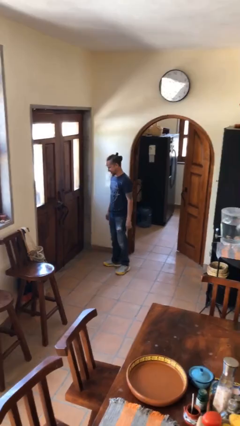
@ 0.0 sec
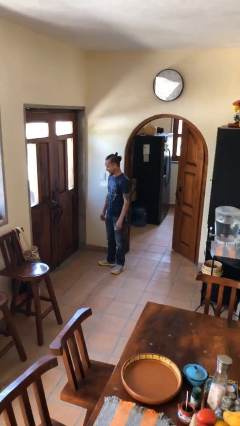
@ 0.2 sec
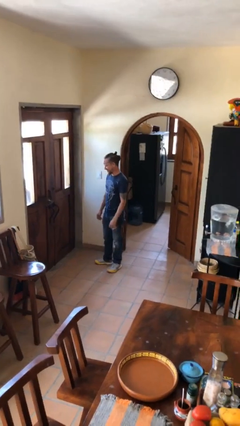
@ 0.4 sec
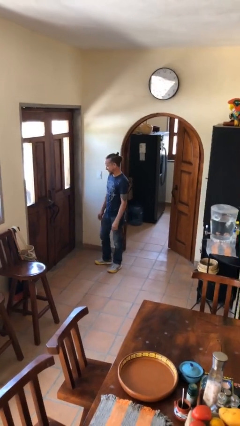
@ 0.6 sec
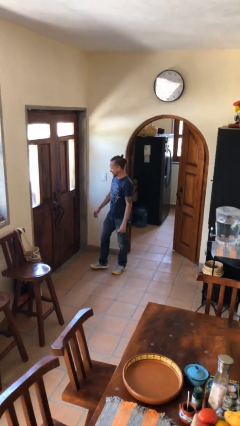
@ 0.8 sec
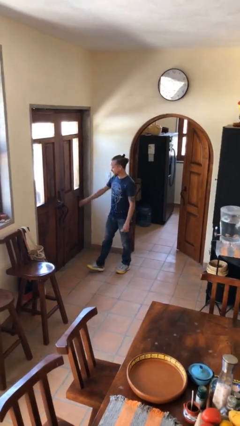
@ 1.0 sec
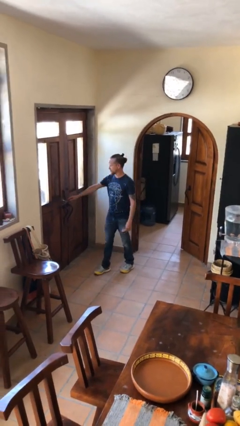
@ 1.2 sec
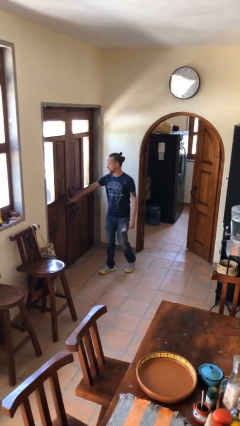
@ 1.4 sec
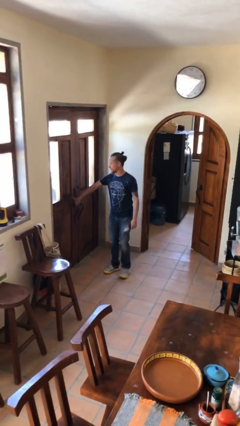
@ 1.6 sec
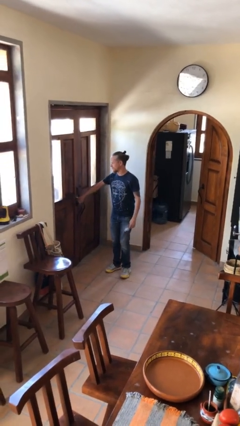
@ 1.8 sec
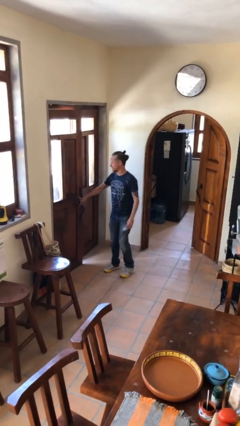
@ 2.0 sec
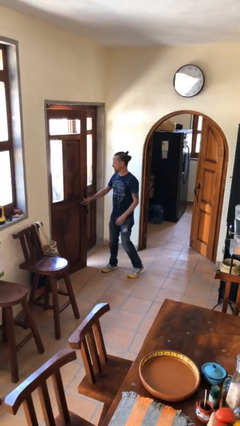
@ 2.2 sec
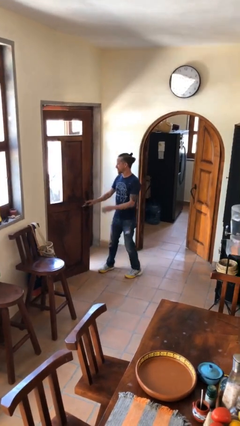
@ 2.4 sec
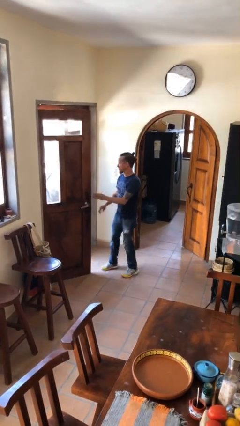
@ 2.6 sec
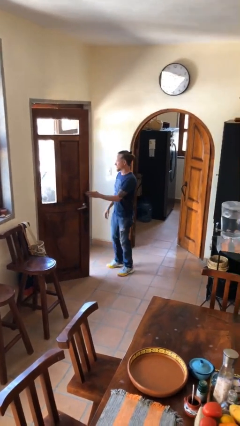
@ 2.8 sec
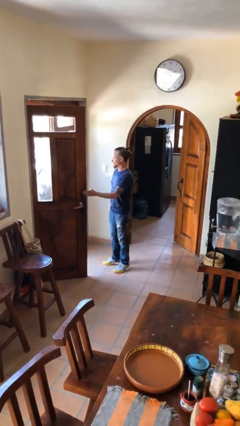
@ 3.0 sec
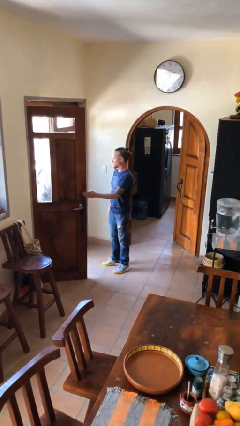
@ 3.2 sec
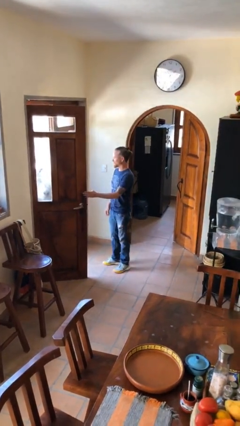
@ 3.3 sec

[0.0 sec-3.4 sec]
person opens facility door

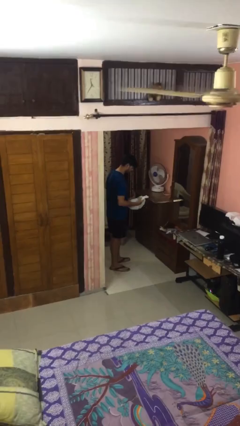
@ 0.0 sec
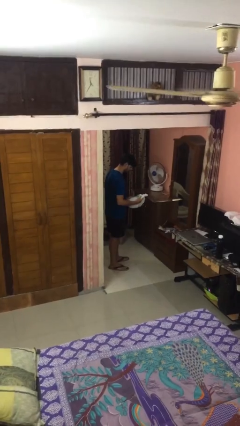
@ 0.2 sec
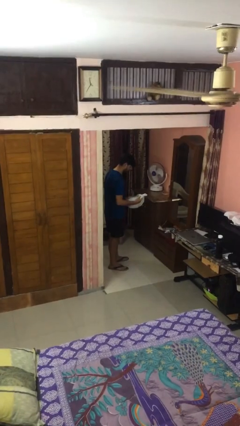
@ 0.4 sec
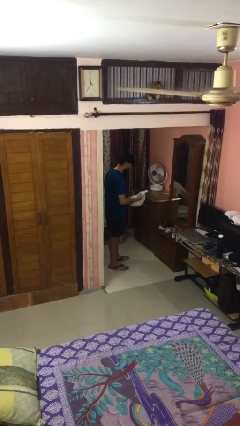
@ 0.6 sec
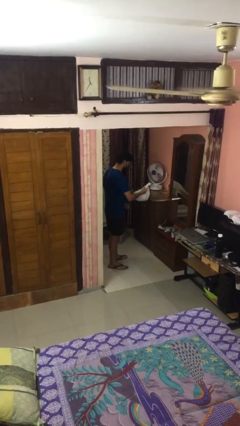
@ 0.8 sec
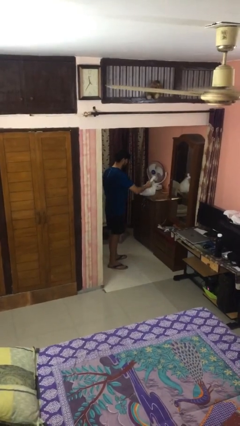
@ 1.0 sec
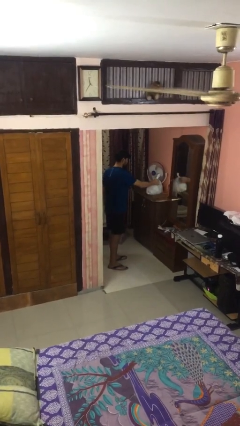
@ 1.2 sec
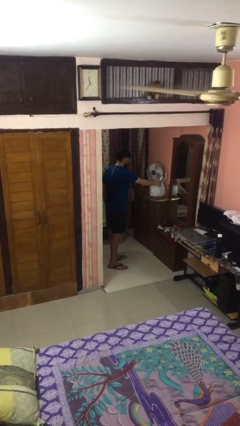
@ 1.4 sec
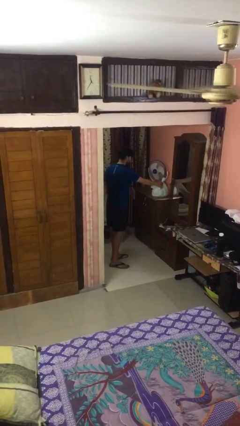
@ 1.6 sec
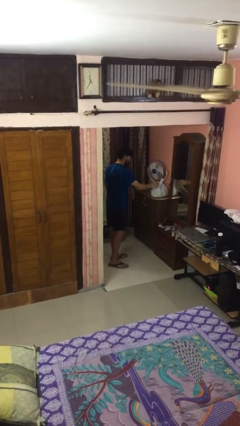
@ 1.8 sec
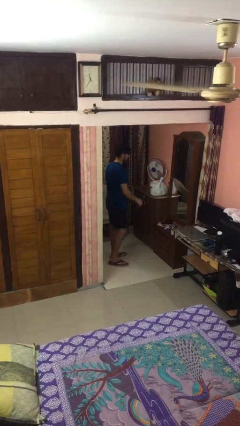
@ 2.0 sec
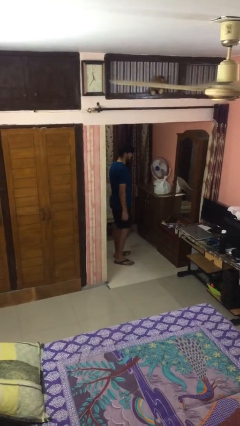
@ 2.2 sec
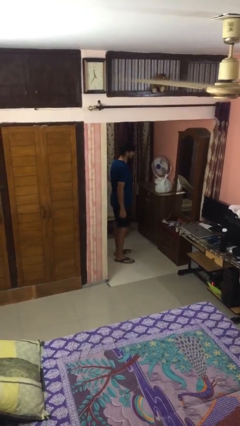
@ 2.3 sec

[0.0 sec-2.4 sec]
person puts down object on countertop

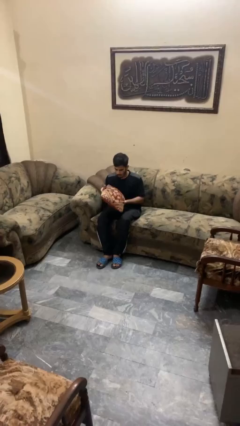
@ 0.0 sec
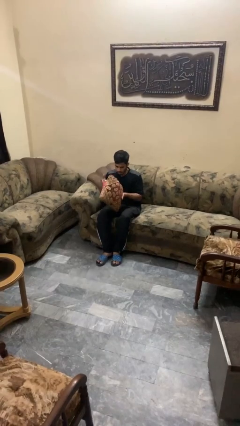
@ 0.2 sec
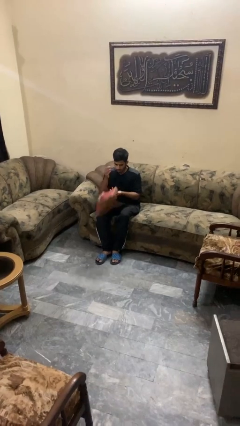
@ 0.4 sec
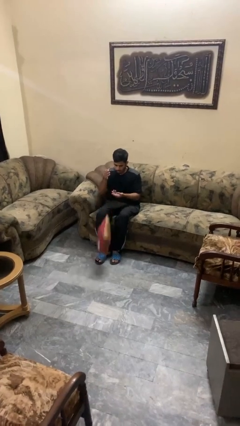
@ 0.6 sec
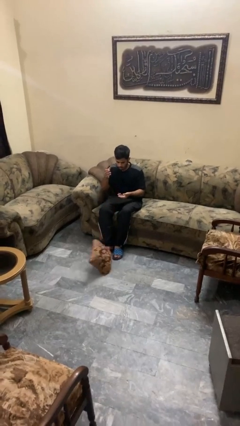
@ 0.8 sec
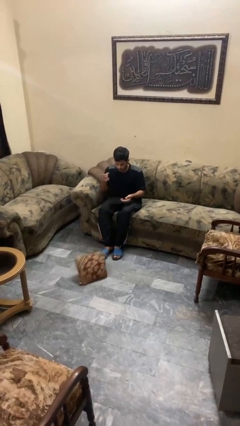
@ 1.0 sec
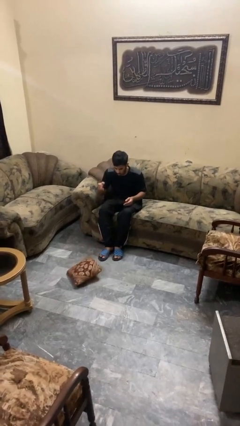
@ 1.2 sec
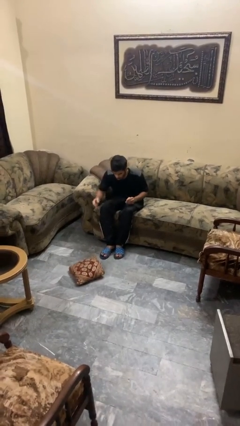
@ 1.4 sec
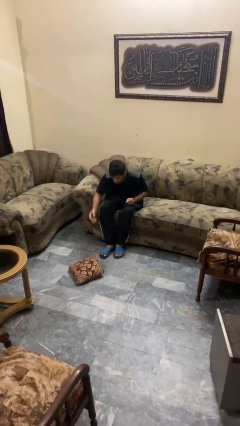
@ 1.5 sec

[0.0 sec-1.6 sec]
person drops object

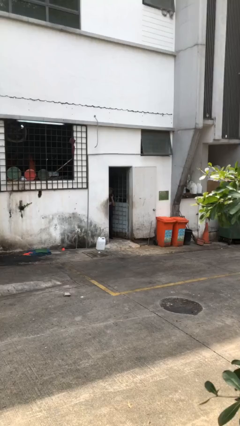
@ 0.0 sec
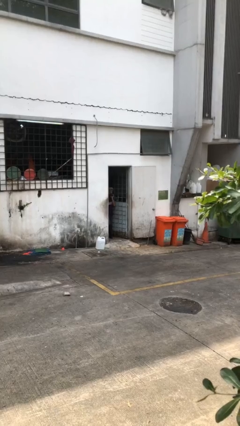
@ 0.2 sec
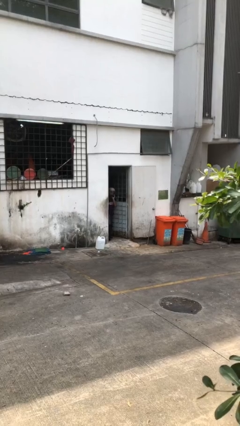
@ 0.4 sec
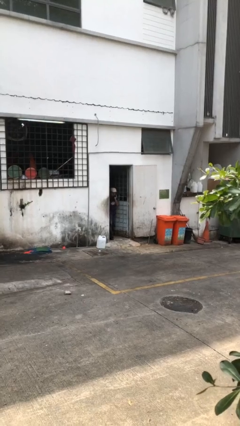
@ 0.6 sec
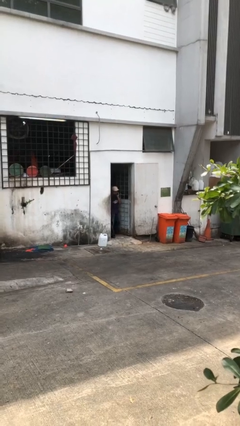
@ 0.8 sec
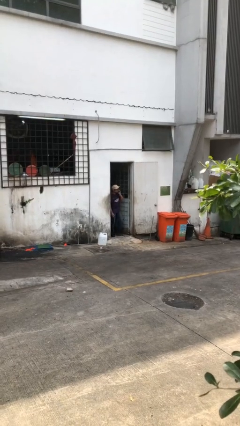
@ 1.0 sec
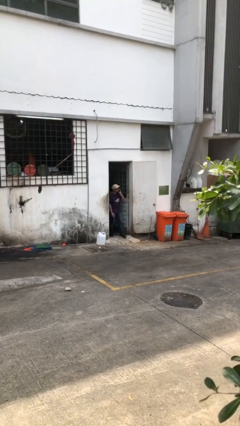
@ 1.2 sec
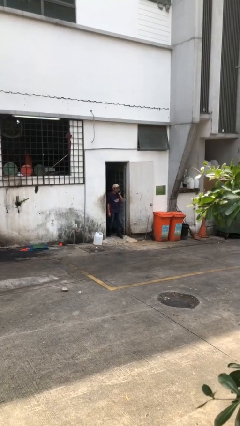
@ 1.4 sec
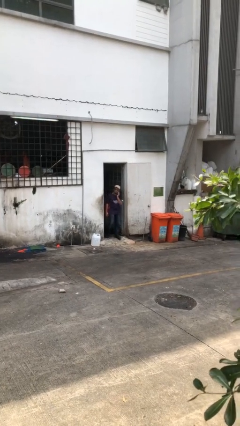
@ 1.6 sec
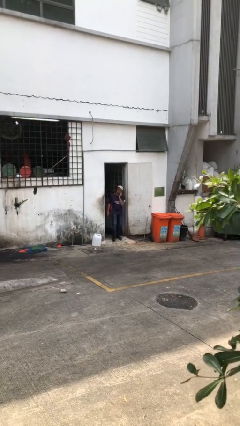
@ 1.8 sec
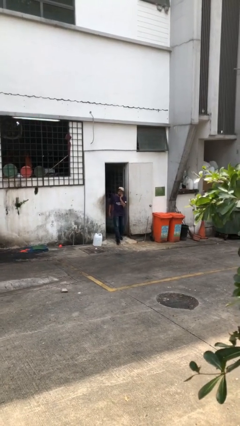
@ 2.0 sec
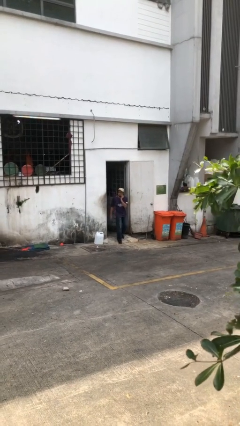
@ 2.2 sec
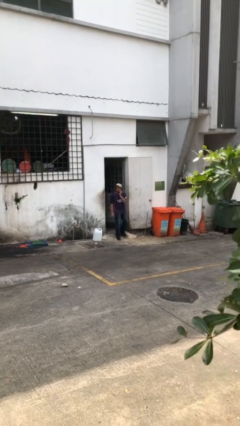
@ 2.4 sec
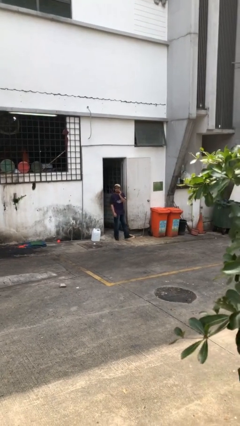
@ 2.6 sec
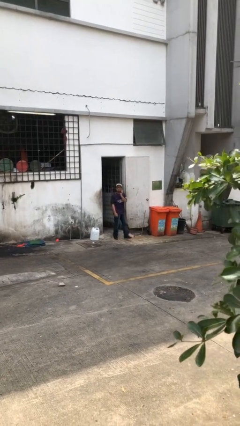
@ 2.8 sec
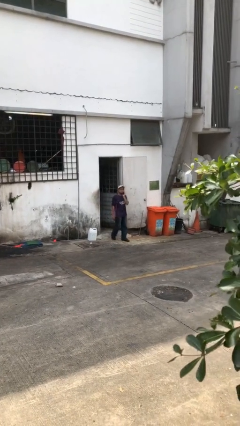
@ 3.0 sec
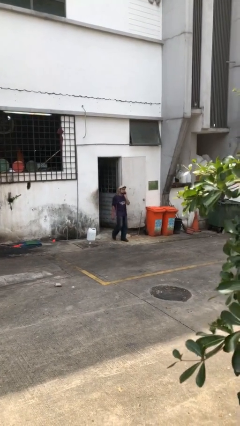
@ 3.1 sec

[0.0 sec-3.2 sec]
person enters scene through structure

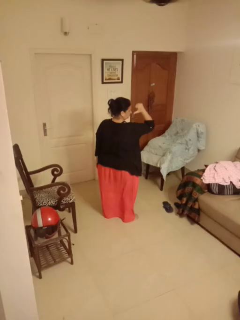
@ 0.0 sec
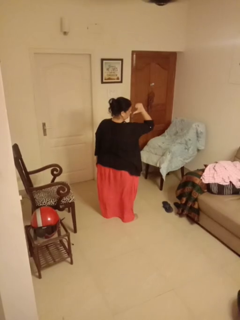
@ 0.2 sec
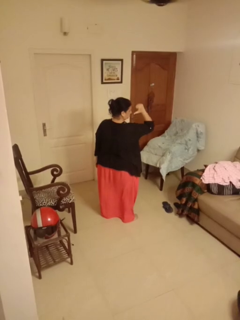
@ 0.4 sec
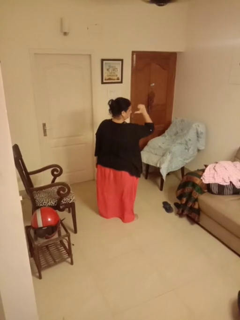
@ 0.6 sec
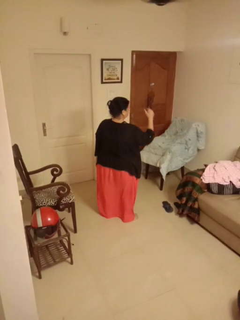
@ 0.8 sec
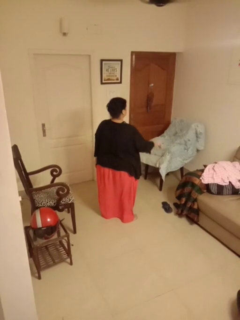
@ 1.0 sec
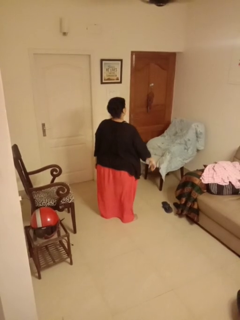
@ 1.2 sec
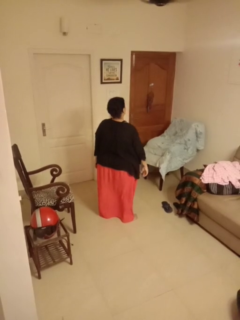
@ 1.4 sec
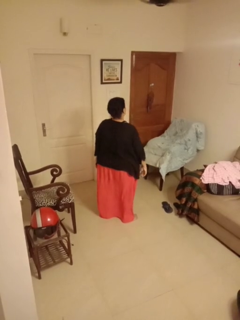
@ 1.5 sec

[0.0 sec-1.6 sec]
person gestures behind me

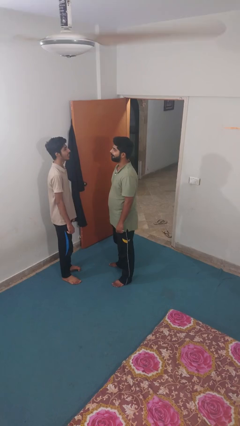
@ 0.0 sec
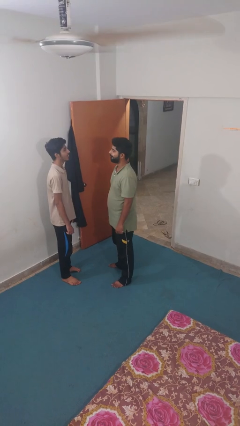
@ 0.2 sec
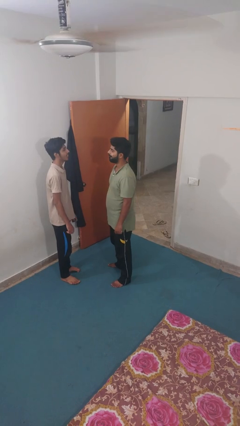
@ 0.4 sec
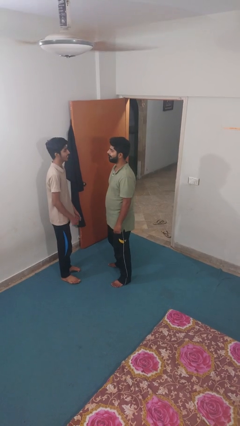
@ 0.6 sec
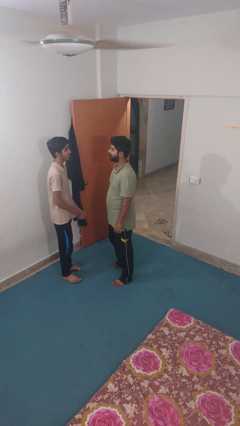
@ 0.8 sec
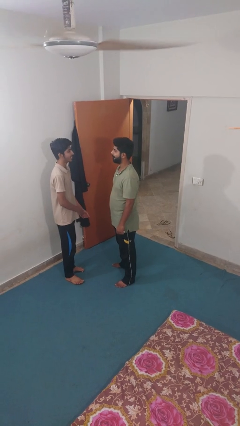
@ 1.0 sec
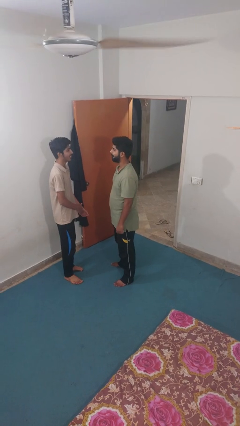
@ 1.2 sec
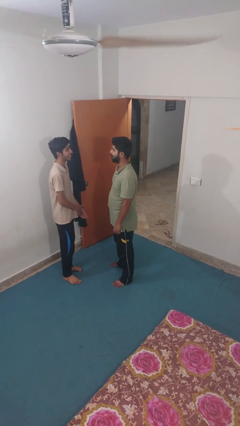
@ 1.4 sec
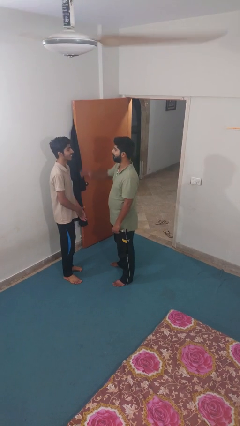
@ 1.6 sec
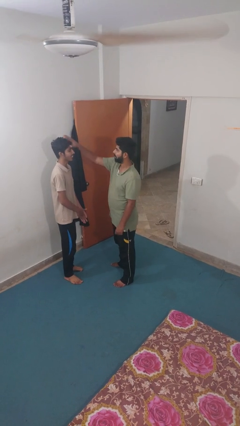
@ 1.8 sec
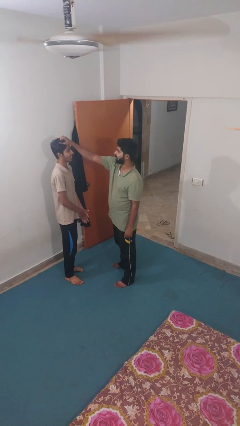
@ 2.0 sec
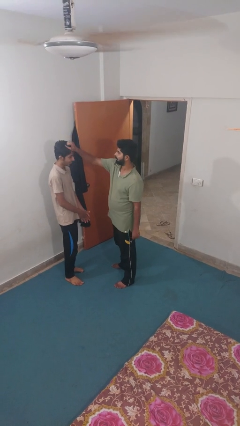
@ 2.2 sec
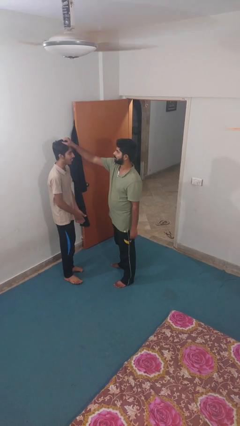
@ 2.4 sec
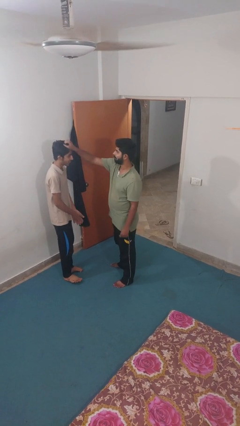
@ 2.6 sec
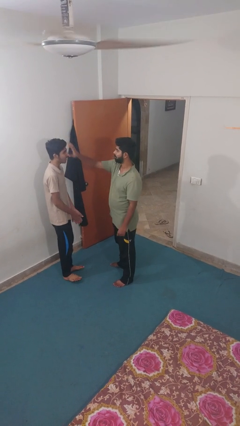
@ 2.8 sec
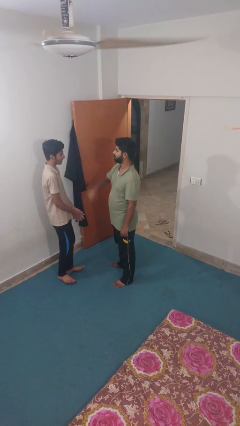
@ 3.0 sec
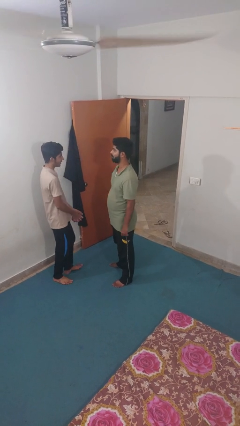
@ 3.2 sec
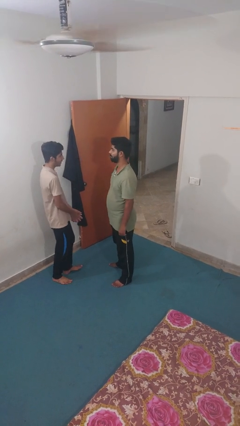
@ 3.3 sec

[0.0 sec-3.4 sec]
person grabs person by hair

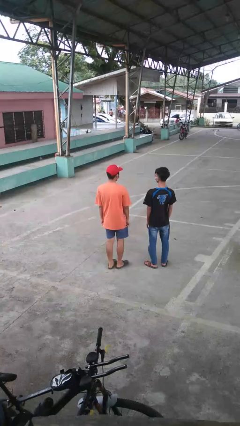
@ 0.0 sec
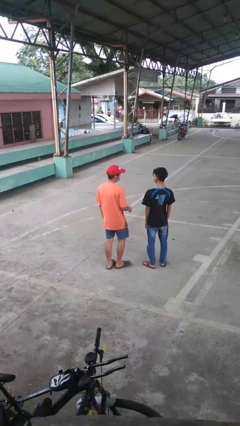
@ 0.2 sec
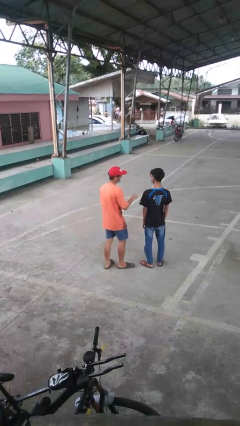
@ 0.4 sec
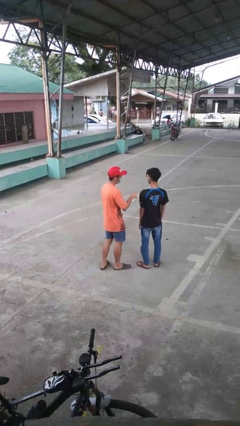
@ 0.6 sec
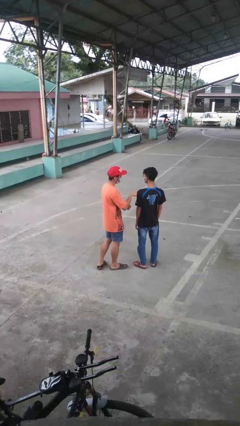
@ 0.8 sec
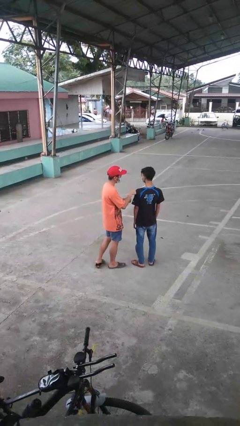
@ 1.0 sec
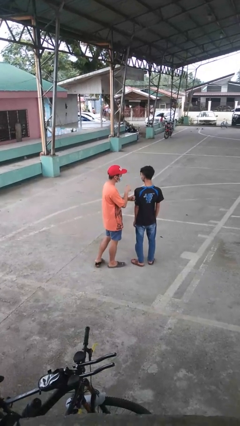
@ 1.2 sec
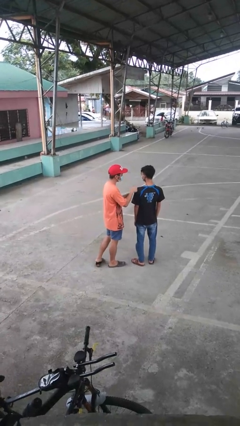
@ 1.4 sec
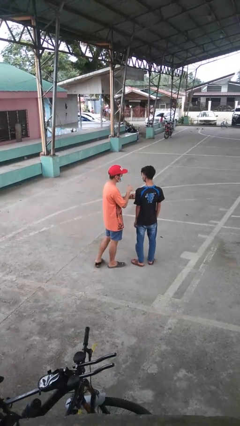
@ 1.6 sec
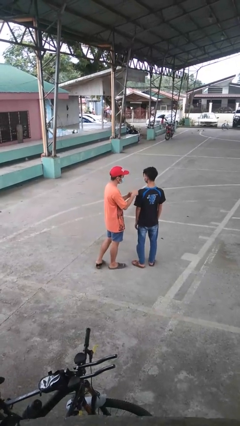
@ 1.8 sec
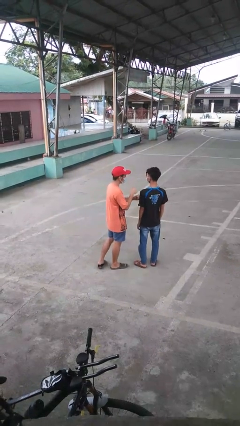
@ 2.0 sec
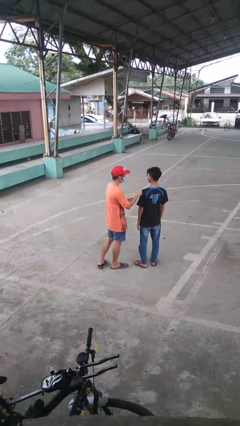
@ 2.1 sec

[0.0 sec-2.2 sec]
person pounds shoulders of person
